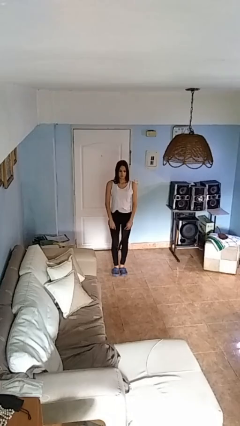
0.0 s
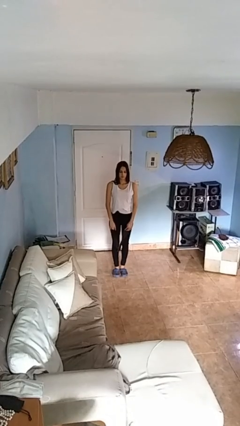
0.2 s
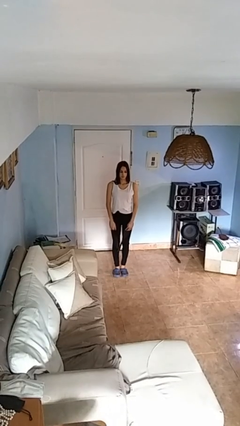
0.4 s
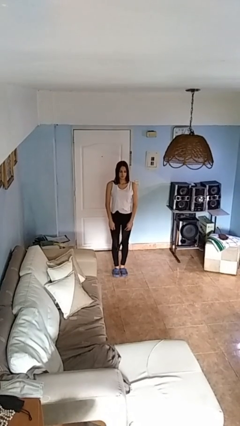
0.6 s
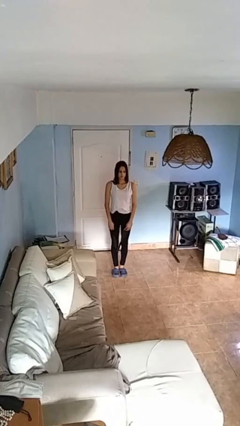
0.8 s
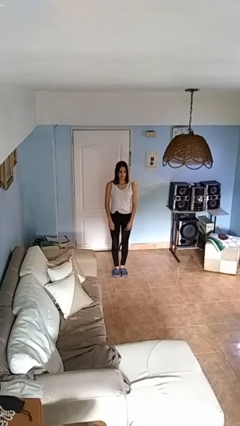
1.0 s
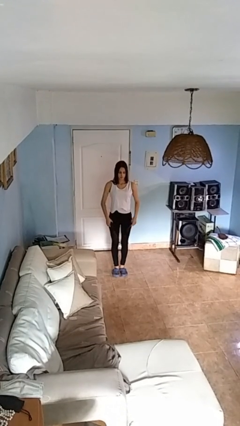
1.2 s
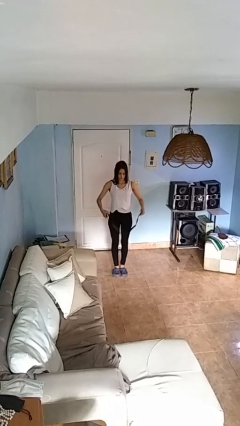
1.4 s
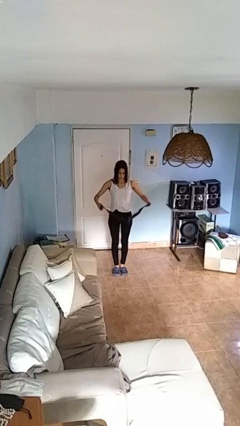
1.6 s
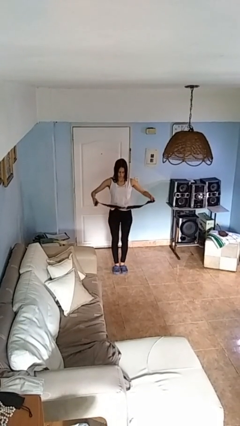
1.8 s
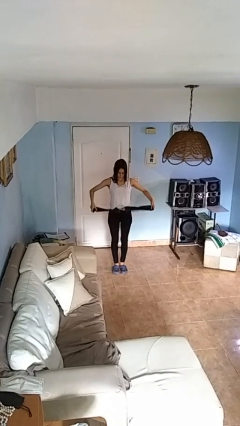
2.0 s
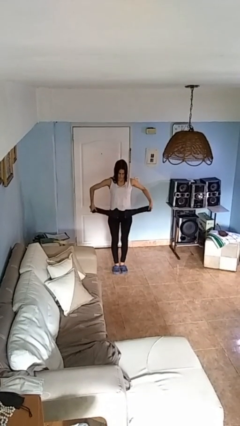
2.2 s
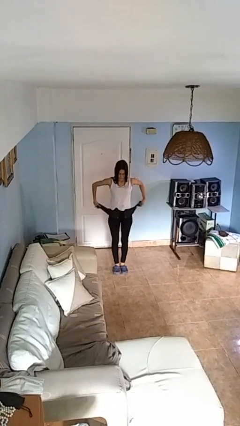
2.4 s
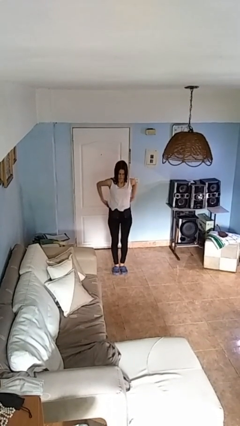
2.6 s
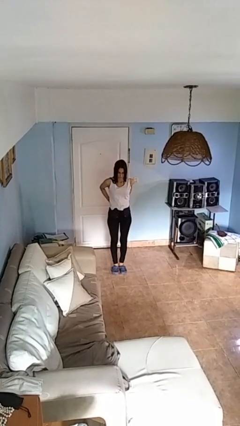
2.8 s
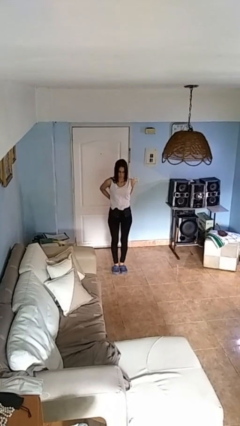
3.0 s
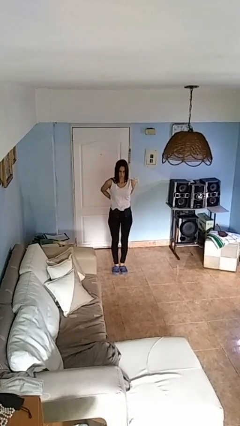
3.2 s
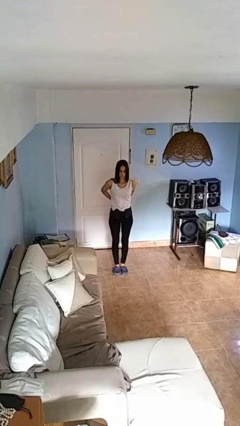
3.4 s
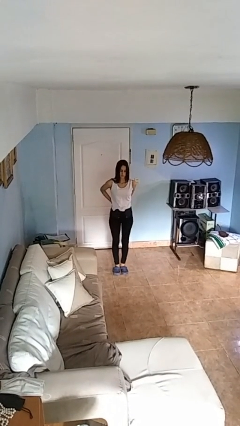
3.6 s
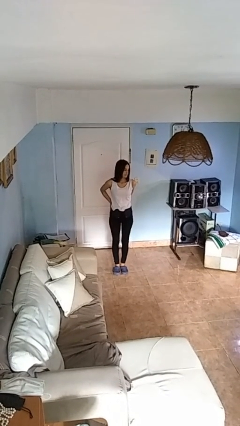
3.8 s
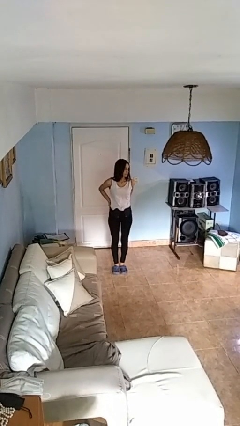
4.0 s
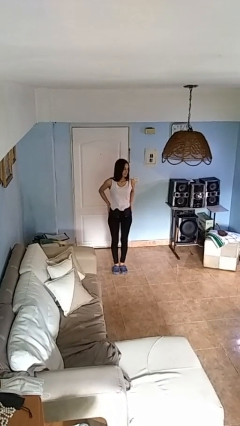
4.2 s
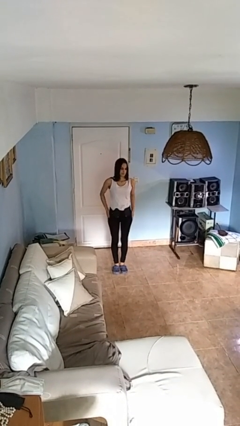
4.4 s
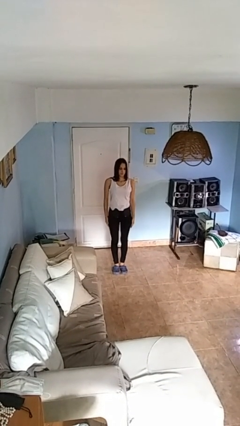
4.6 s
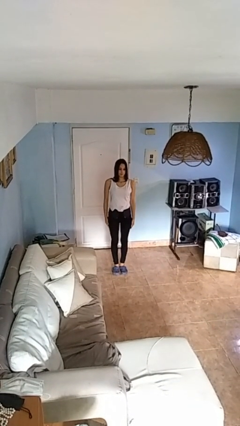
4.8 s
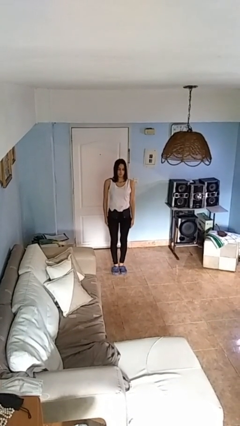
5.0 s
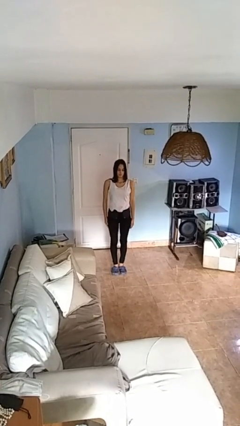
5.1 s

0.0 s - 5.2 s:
person puts on belt

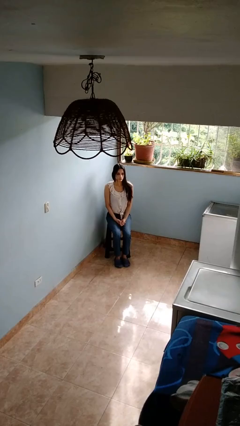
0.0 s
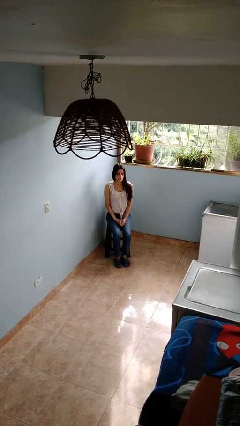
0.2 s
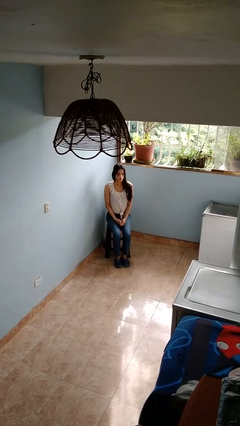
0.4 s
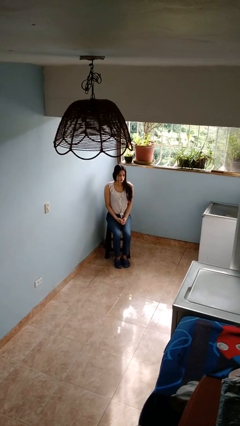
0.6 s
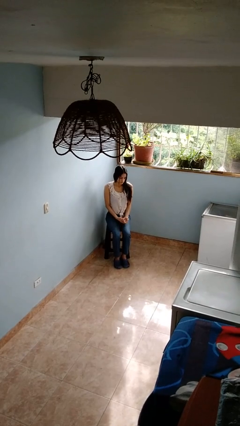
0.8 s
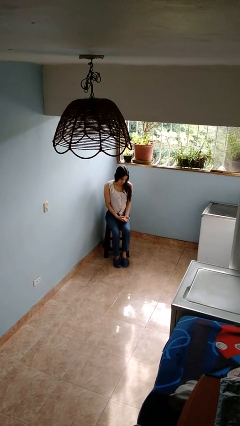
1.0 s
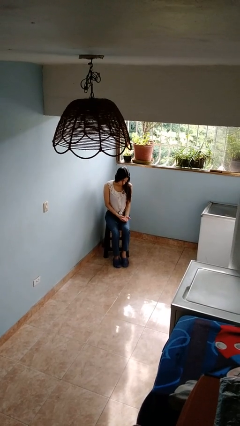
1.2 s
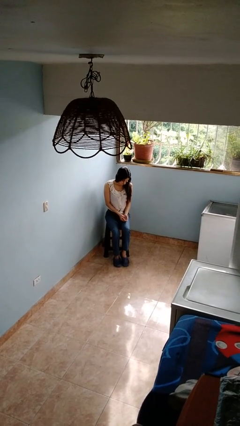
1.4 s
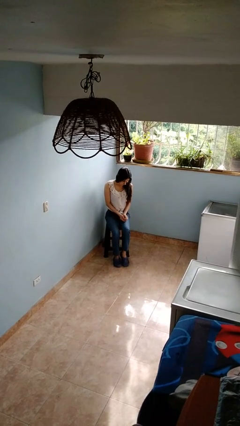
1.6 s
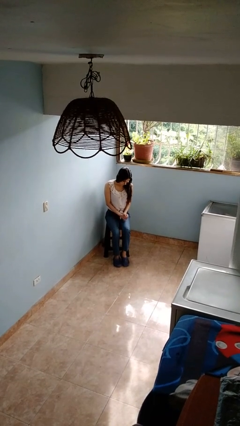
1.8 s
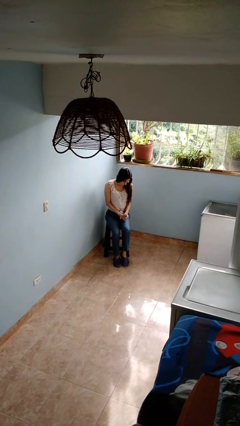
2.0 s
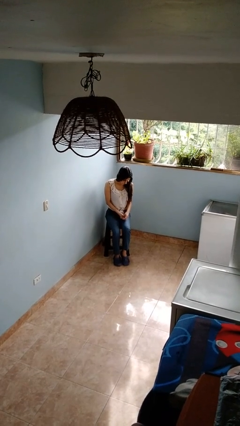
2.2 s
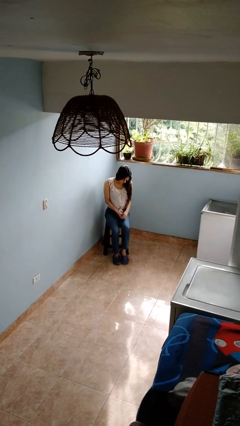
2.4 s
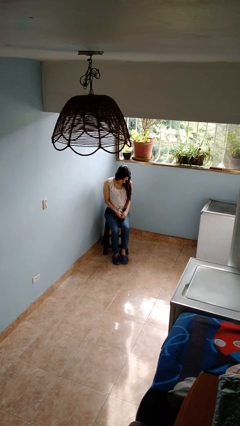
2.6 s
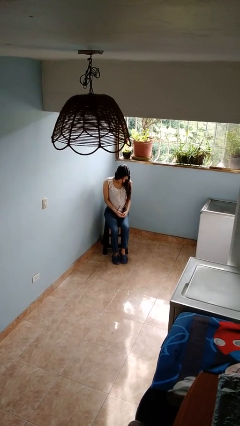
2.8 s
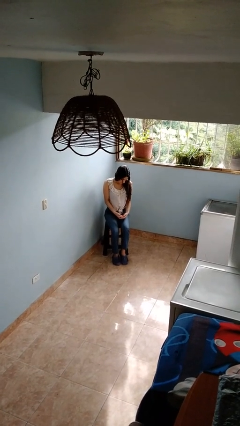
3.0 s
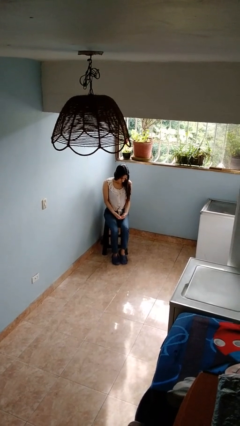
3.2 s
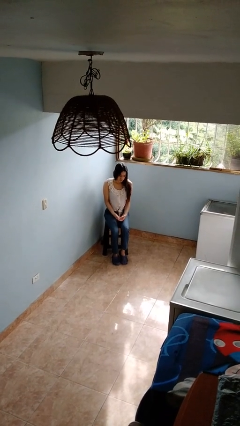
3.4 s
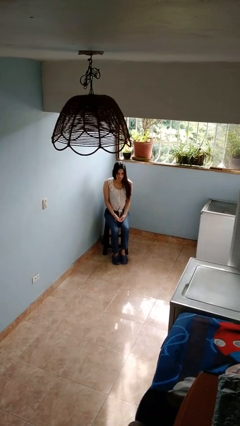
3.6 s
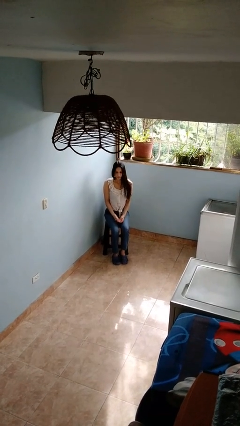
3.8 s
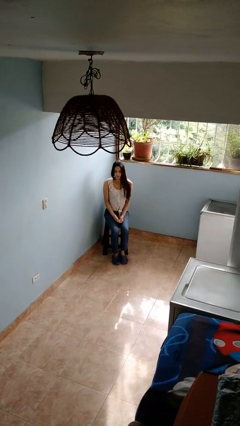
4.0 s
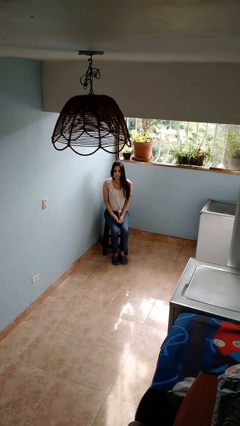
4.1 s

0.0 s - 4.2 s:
person looks at hands in lap

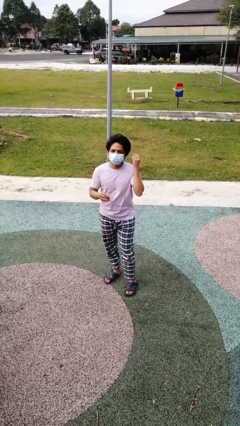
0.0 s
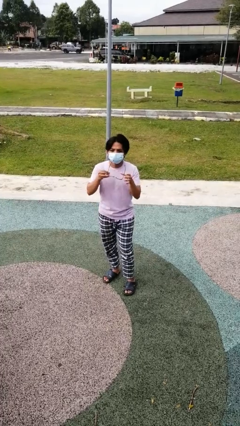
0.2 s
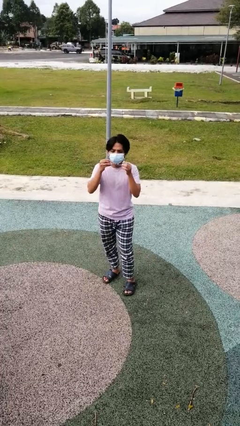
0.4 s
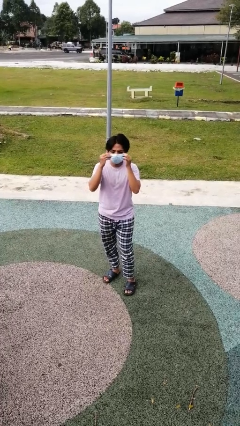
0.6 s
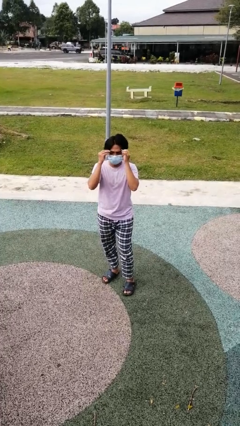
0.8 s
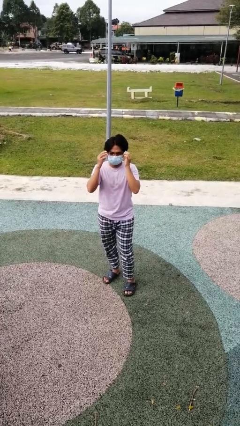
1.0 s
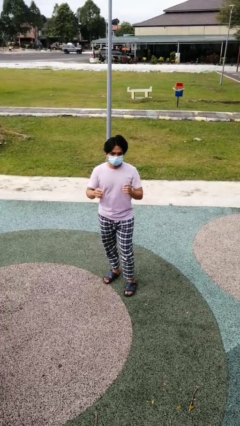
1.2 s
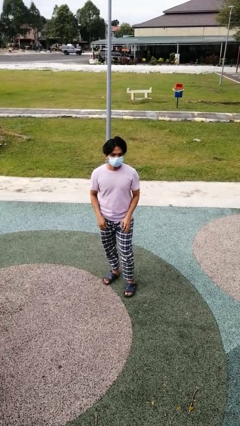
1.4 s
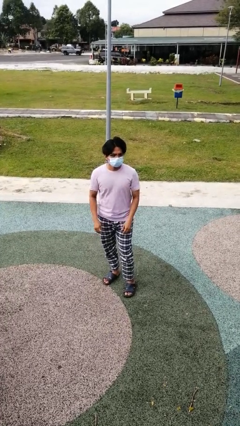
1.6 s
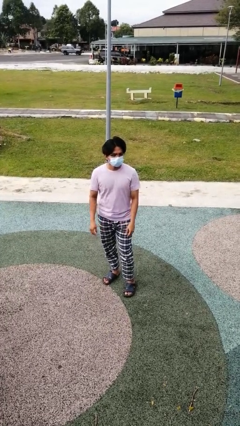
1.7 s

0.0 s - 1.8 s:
person puts on glasses

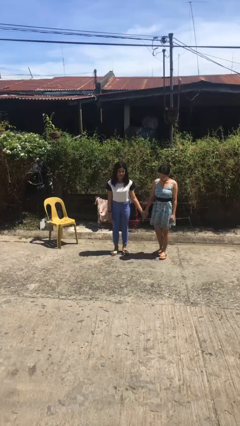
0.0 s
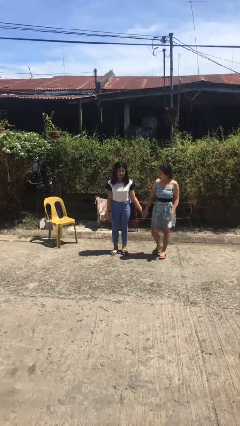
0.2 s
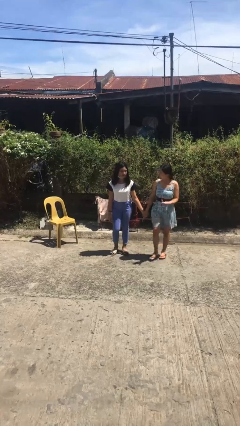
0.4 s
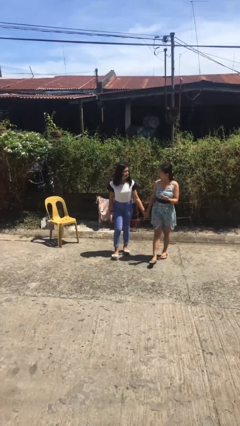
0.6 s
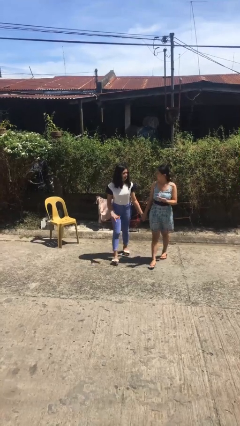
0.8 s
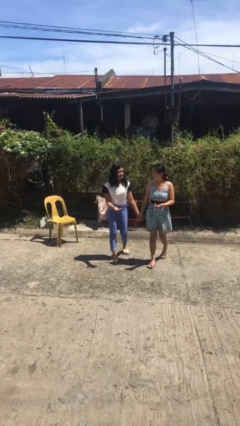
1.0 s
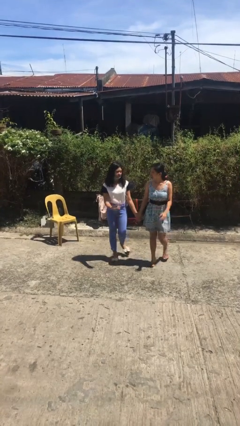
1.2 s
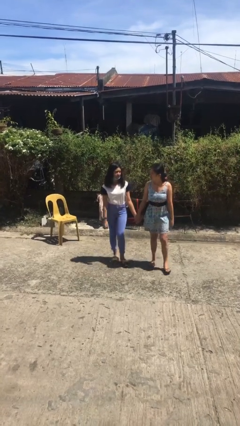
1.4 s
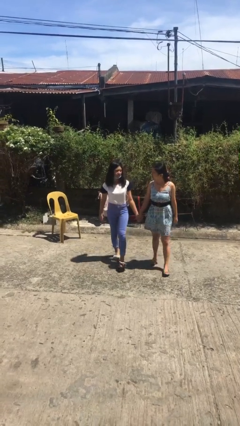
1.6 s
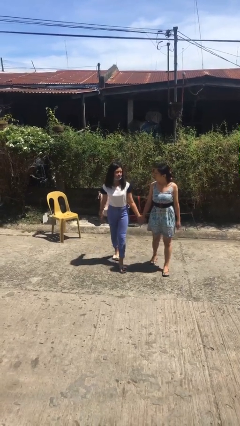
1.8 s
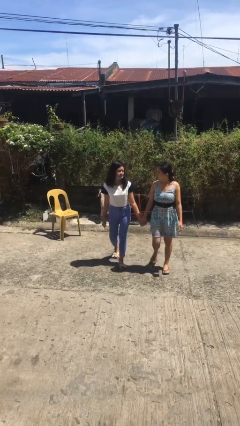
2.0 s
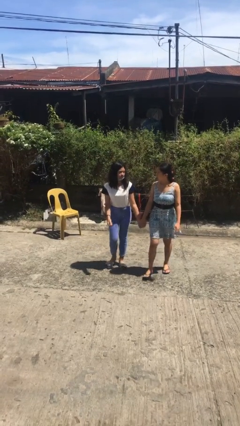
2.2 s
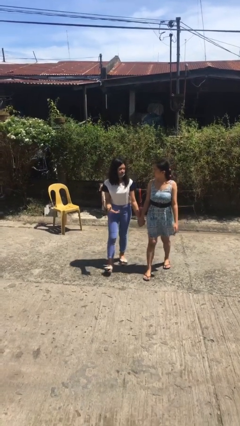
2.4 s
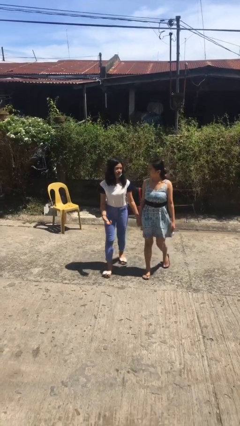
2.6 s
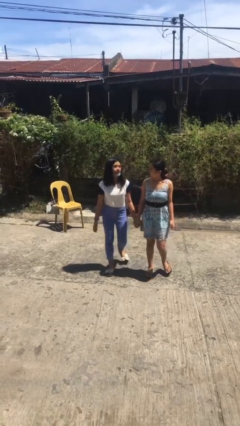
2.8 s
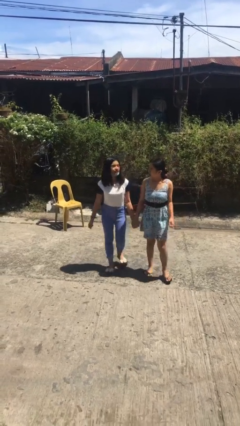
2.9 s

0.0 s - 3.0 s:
person holds hand

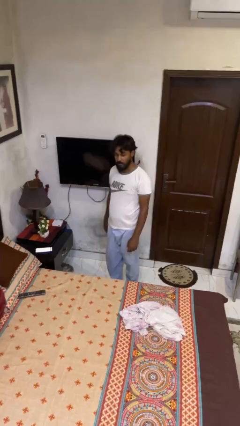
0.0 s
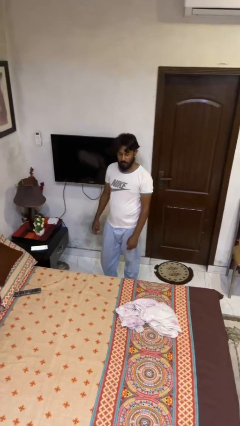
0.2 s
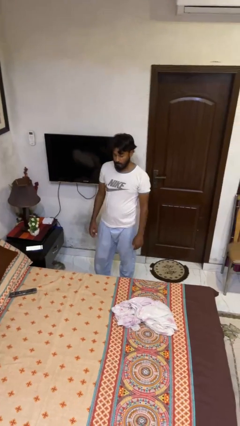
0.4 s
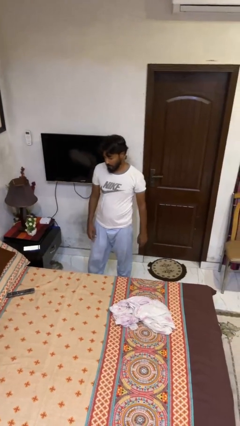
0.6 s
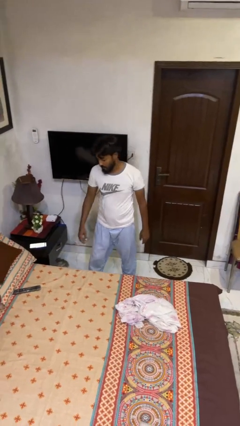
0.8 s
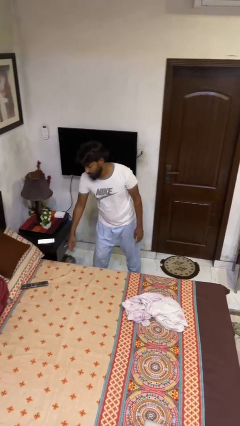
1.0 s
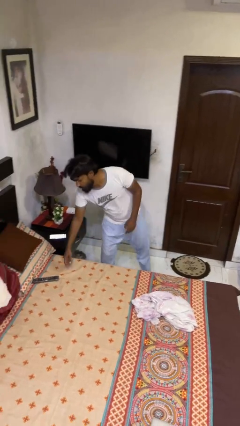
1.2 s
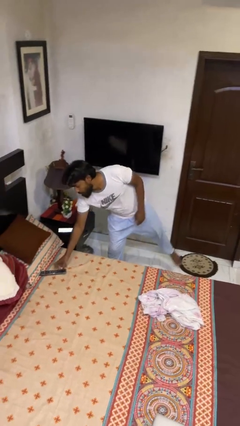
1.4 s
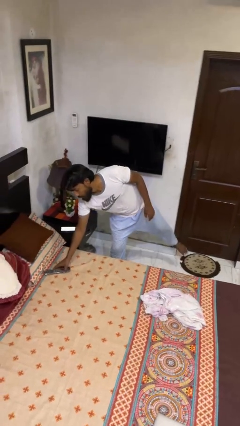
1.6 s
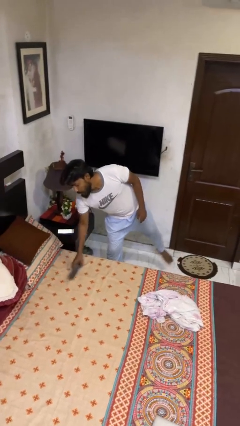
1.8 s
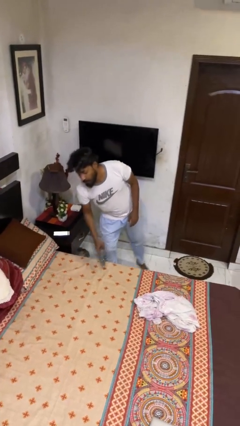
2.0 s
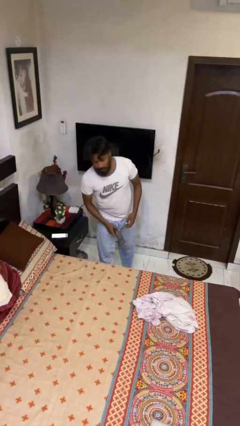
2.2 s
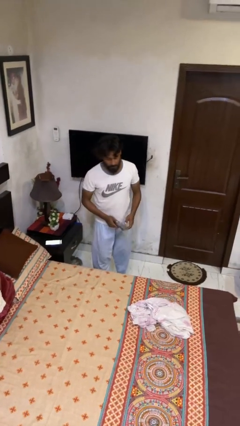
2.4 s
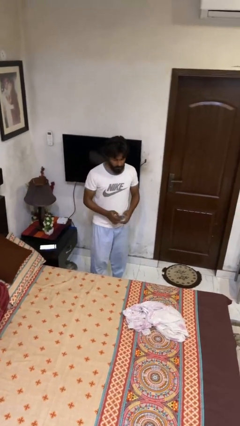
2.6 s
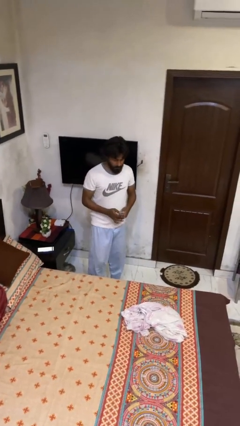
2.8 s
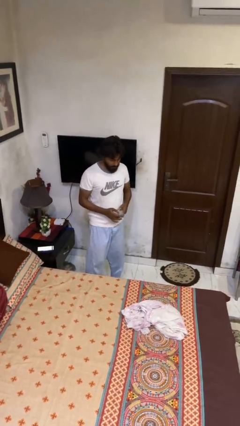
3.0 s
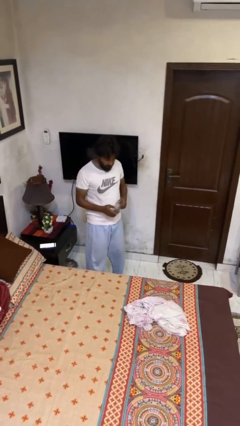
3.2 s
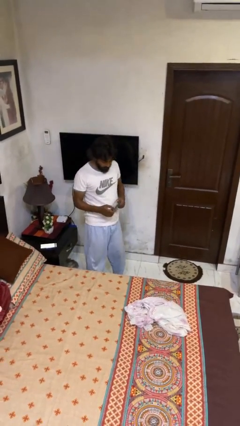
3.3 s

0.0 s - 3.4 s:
person picks up object from bed
